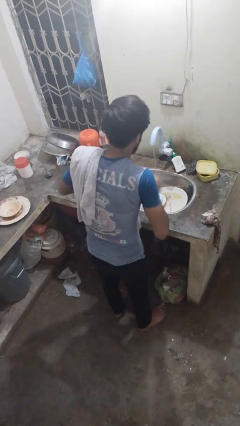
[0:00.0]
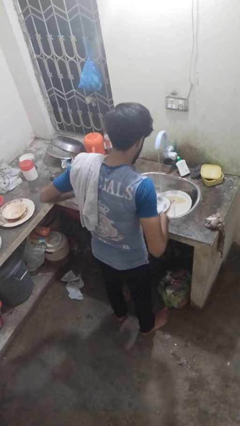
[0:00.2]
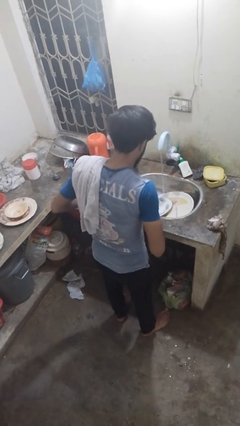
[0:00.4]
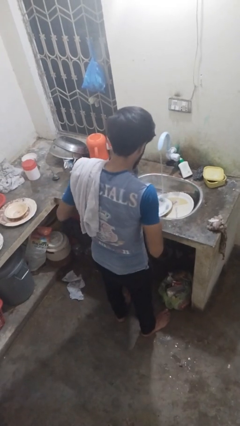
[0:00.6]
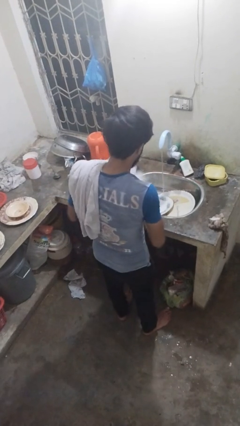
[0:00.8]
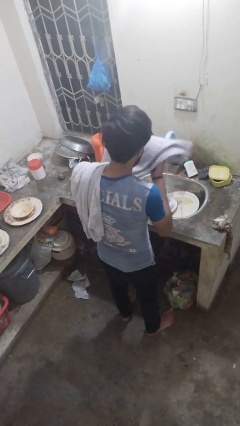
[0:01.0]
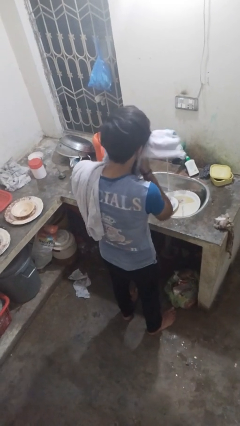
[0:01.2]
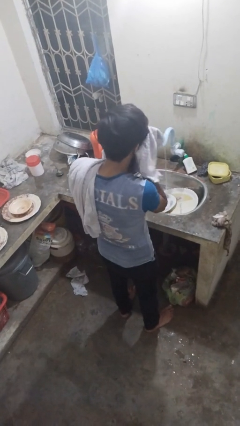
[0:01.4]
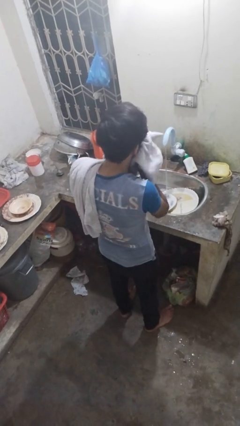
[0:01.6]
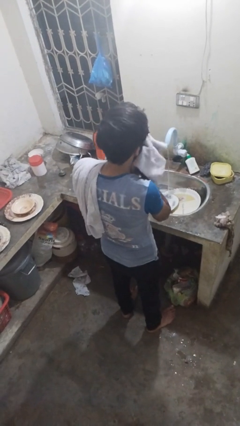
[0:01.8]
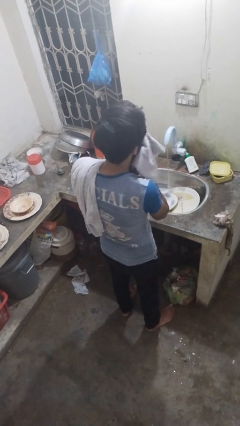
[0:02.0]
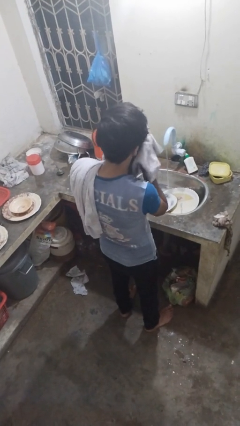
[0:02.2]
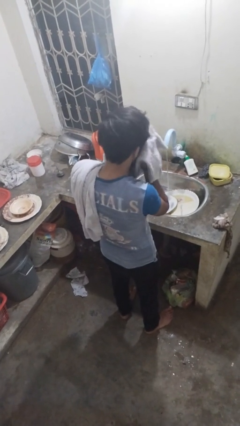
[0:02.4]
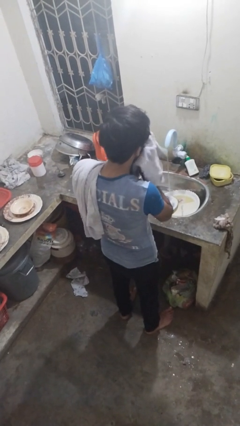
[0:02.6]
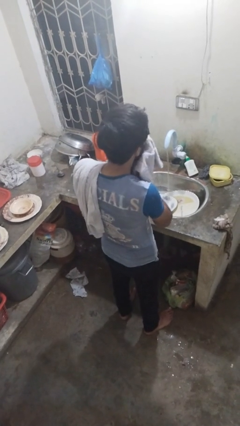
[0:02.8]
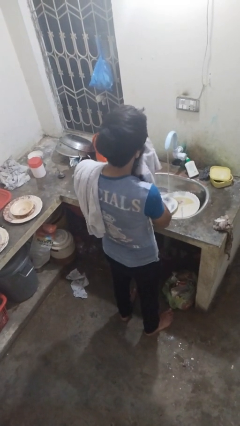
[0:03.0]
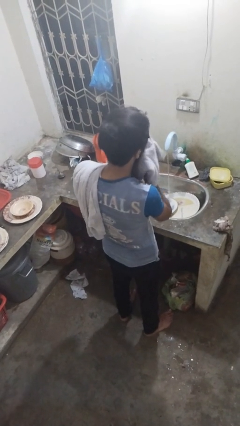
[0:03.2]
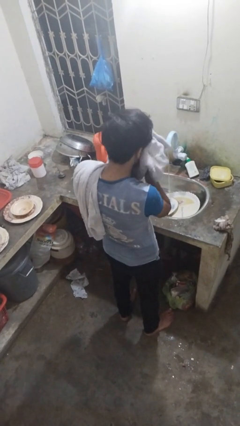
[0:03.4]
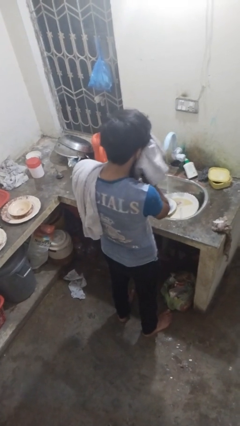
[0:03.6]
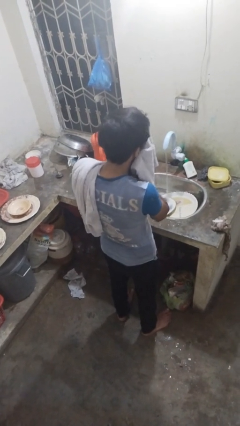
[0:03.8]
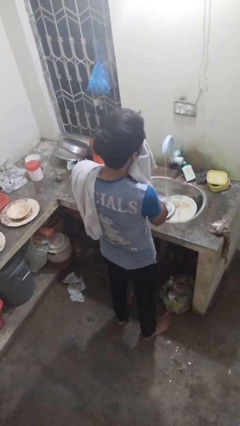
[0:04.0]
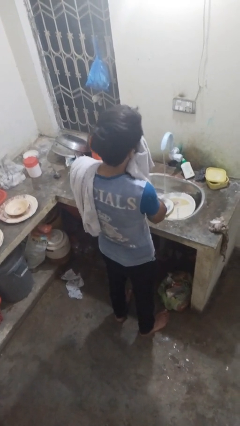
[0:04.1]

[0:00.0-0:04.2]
person dries face with towel

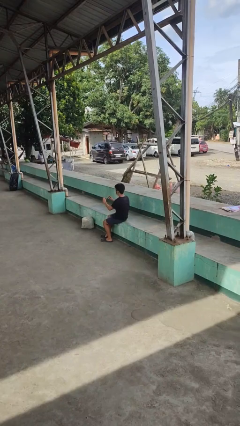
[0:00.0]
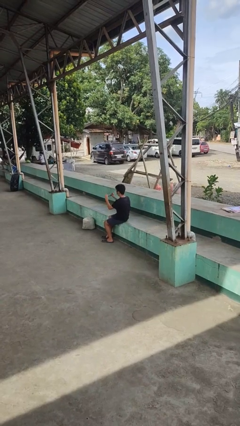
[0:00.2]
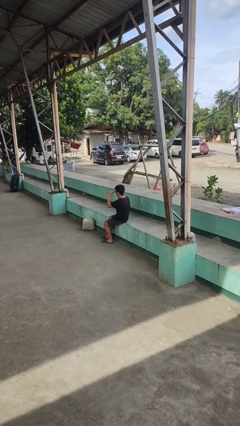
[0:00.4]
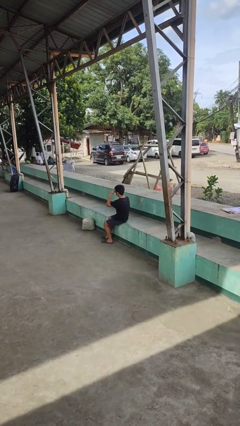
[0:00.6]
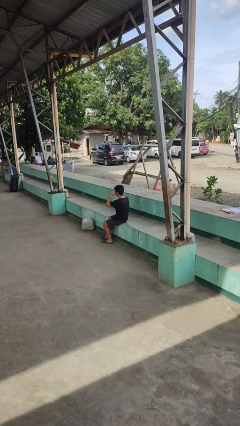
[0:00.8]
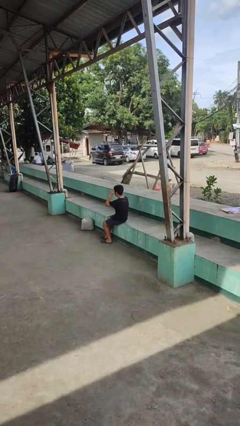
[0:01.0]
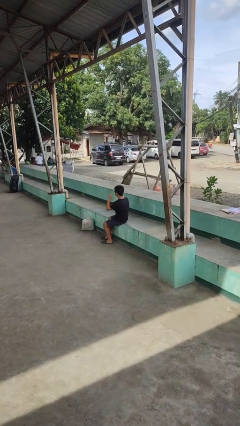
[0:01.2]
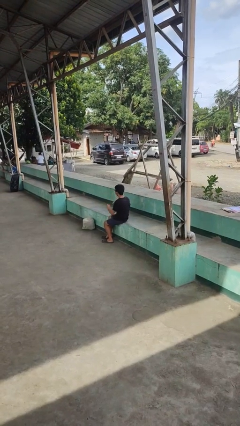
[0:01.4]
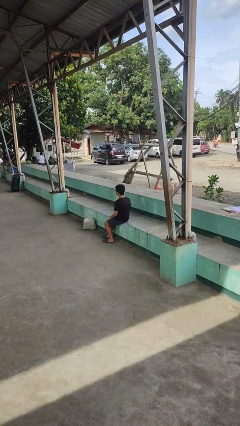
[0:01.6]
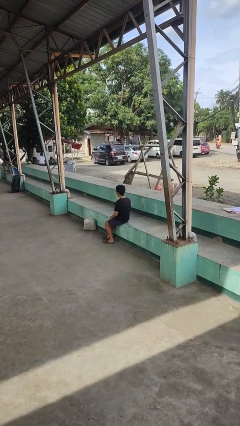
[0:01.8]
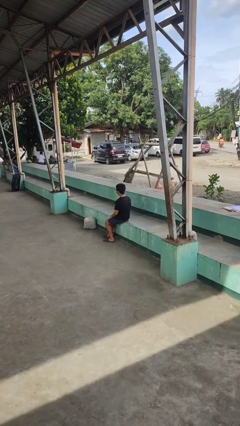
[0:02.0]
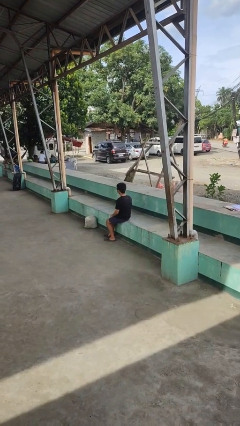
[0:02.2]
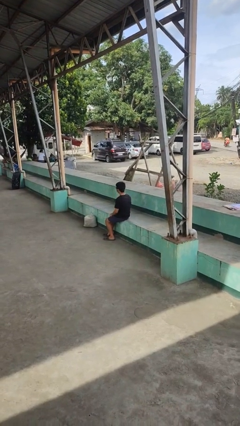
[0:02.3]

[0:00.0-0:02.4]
person puts on sunglasses

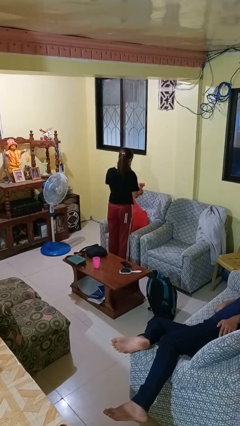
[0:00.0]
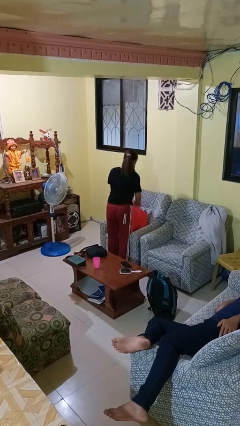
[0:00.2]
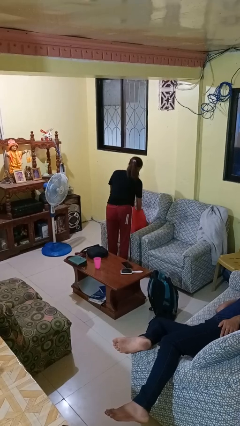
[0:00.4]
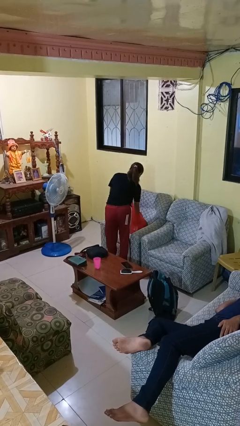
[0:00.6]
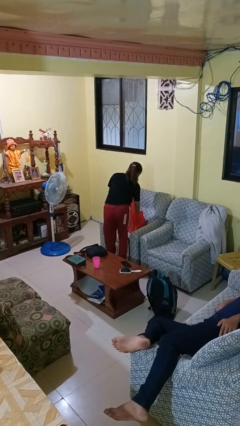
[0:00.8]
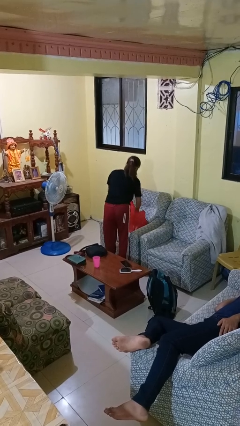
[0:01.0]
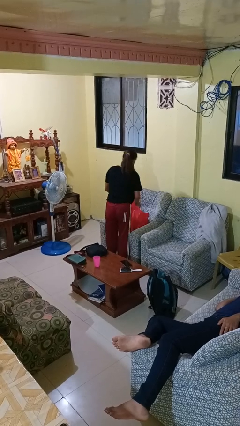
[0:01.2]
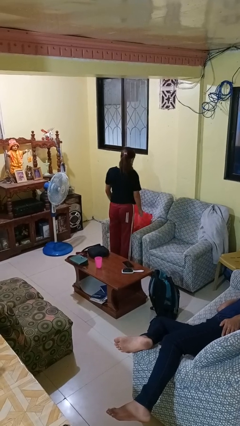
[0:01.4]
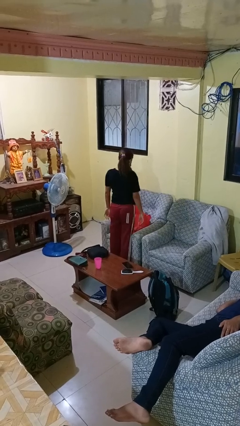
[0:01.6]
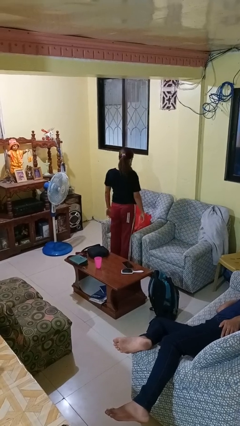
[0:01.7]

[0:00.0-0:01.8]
person puts object into bag

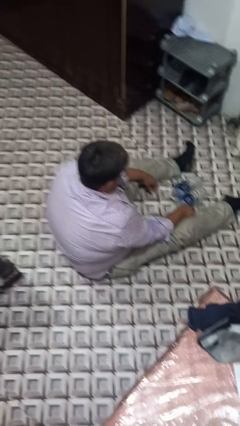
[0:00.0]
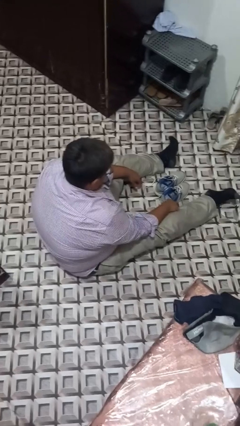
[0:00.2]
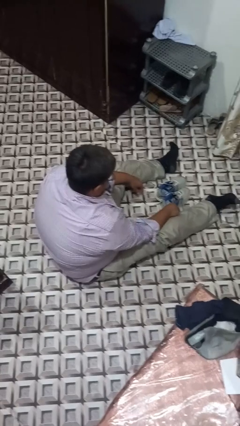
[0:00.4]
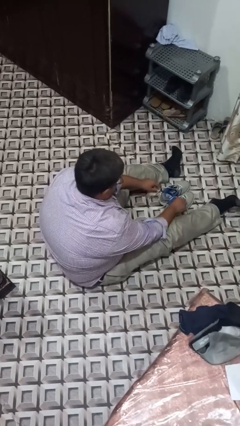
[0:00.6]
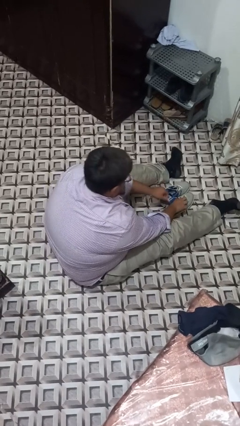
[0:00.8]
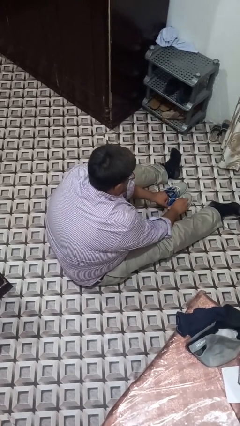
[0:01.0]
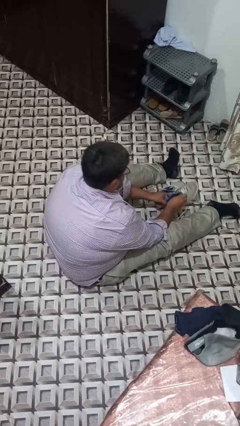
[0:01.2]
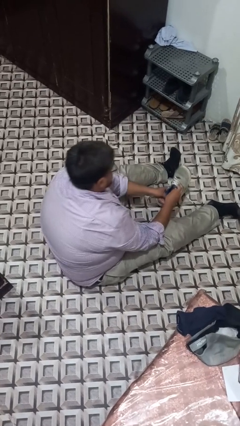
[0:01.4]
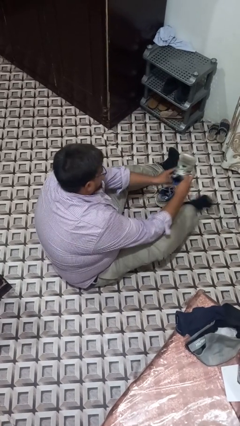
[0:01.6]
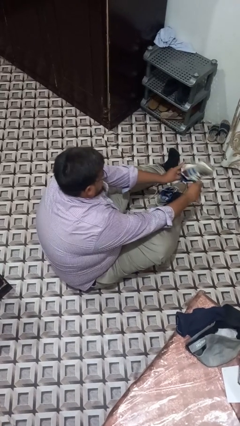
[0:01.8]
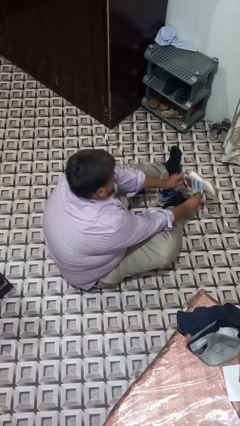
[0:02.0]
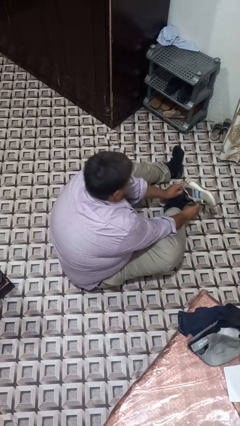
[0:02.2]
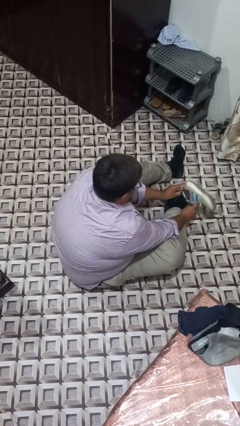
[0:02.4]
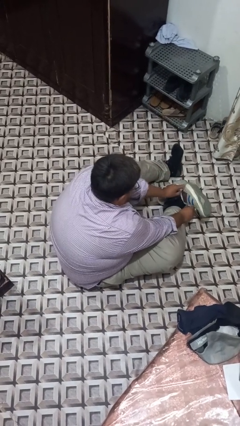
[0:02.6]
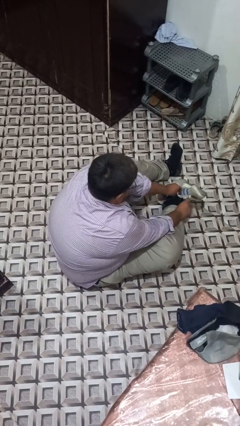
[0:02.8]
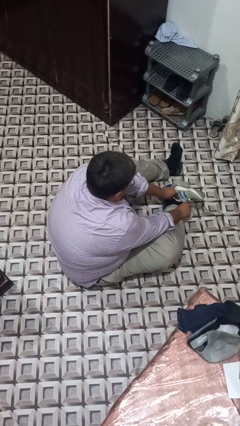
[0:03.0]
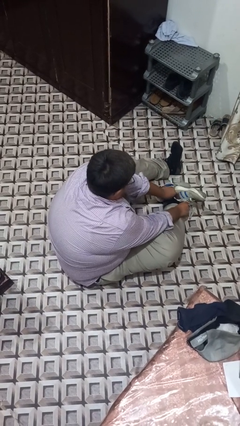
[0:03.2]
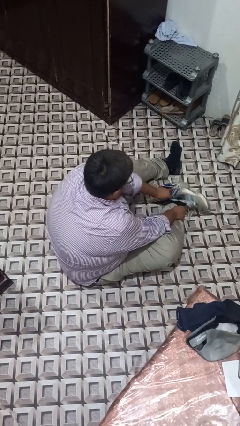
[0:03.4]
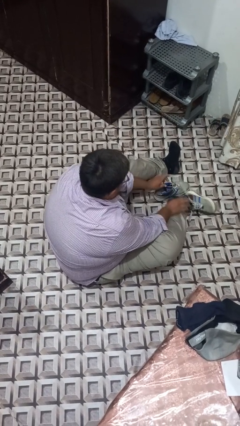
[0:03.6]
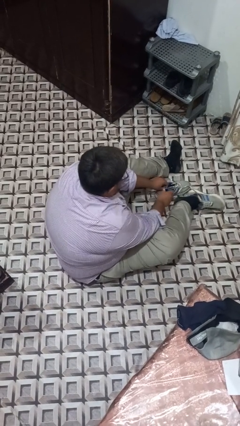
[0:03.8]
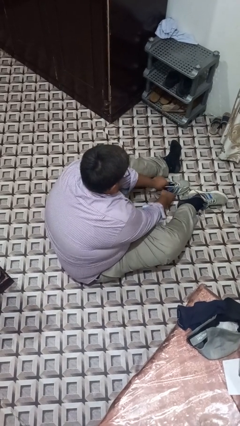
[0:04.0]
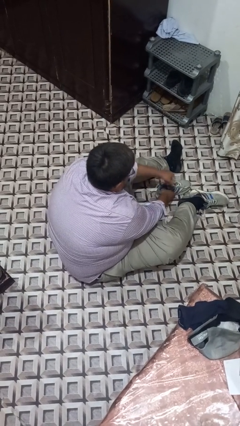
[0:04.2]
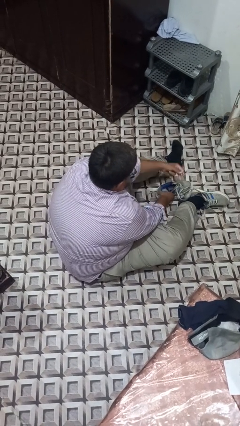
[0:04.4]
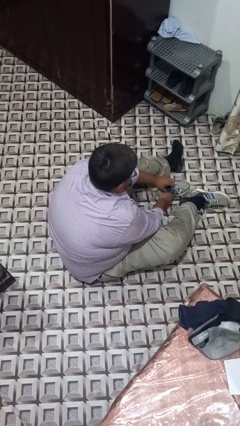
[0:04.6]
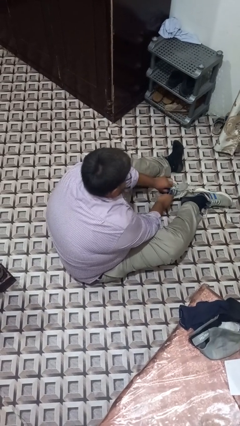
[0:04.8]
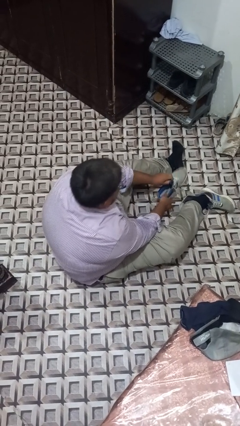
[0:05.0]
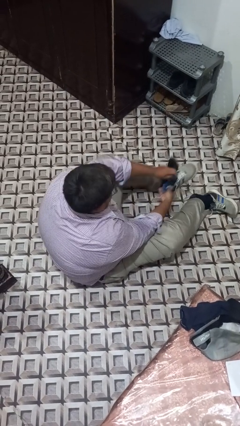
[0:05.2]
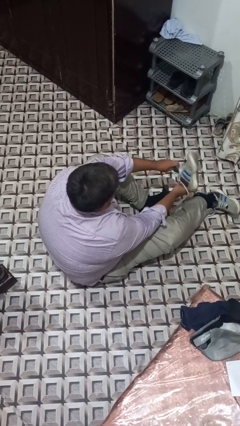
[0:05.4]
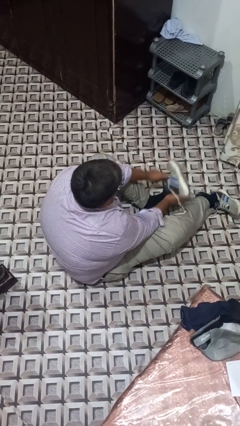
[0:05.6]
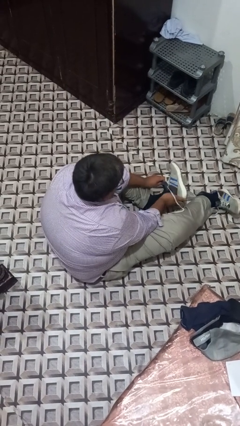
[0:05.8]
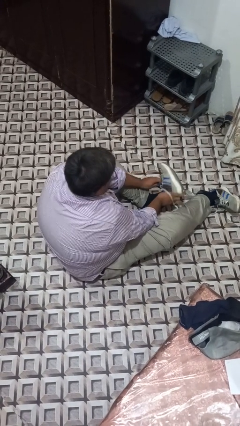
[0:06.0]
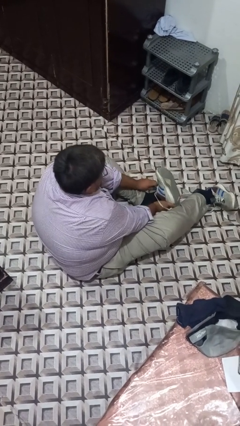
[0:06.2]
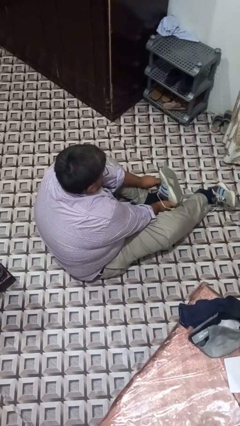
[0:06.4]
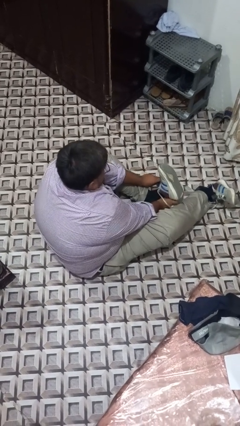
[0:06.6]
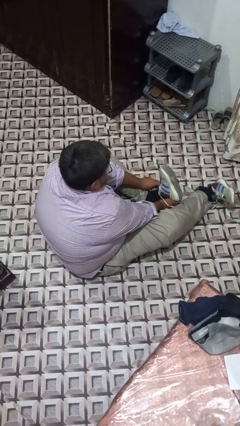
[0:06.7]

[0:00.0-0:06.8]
person puts on shoes

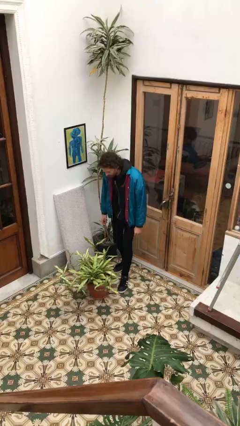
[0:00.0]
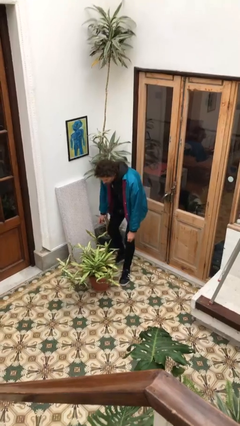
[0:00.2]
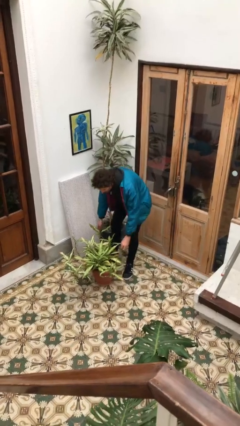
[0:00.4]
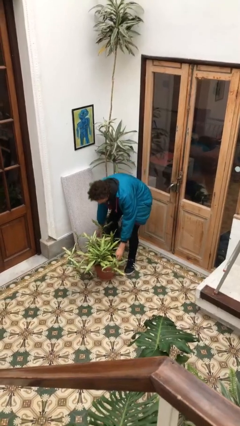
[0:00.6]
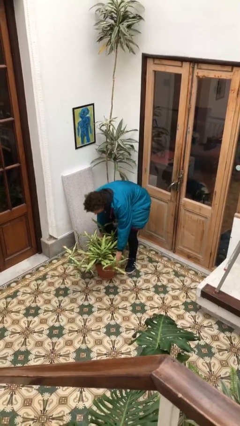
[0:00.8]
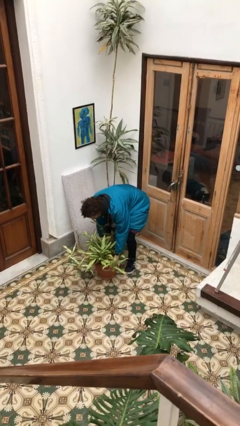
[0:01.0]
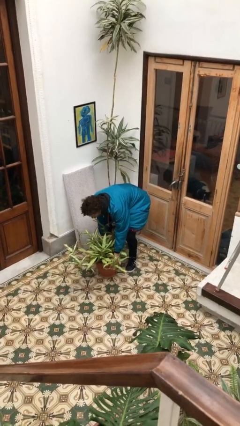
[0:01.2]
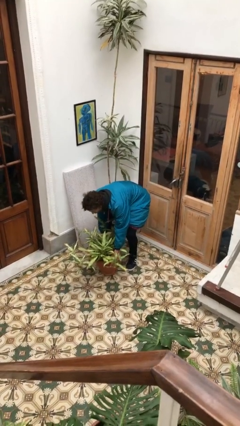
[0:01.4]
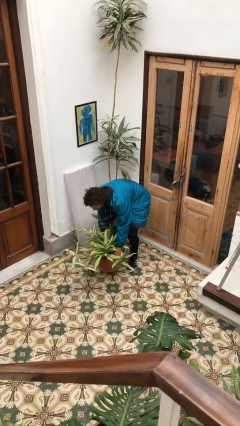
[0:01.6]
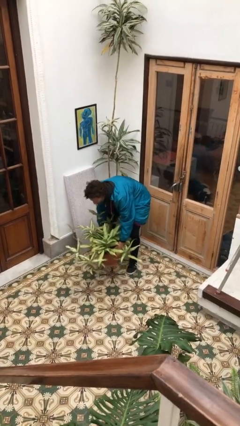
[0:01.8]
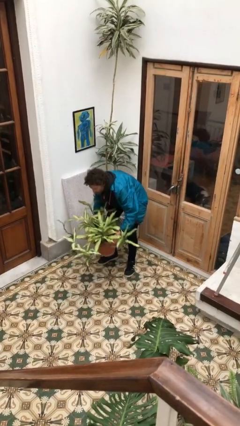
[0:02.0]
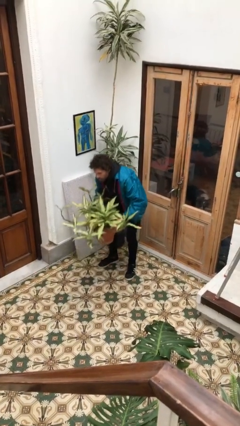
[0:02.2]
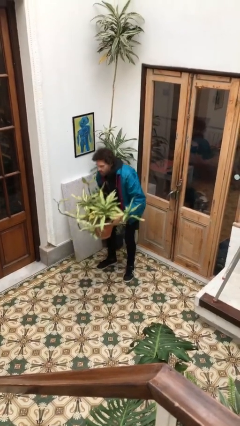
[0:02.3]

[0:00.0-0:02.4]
person picks up object from floor
